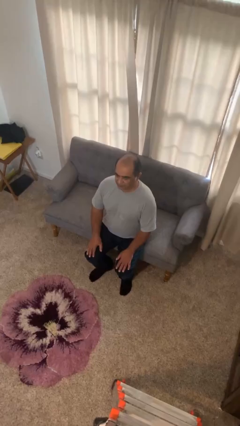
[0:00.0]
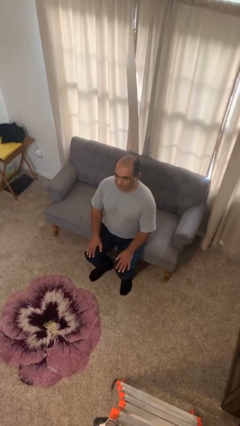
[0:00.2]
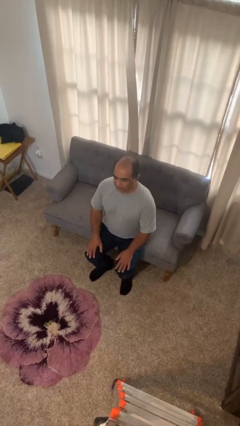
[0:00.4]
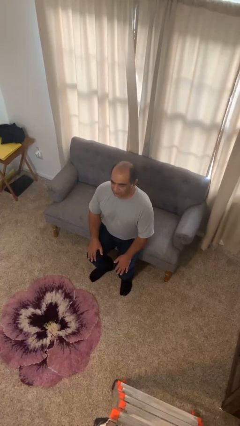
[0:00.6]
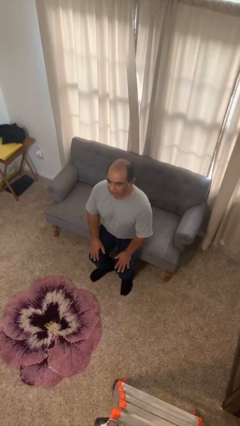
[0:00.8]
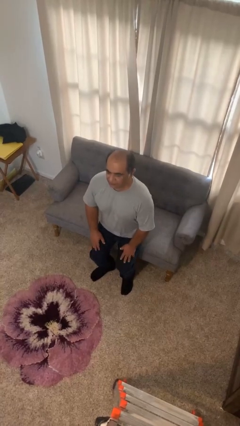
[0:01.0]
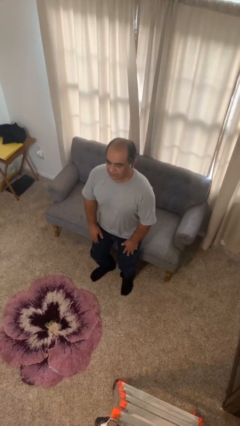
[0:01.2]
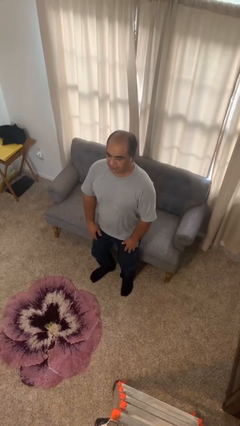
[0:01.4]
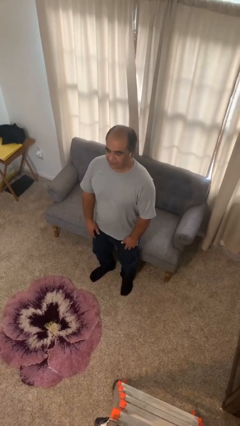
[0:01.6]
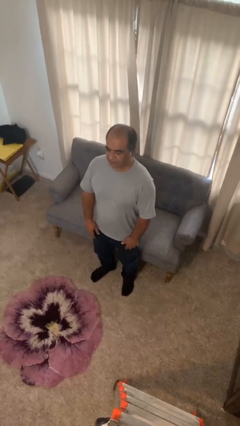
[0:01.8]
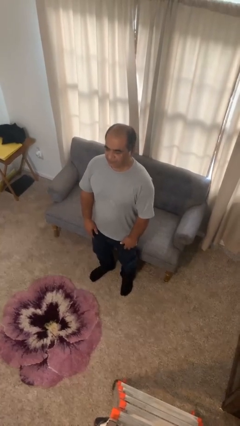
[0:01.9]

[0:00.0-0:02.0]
person stands up

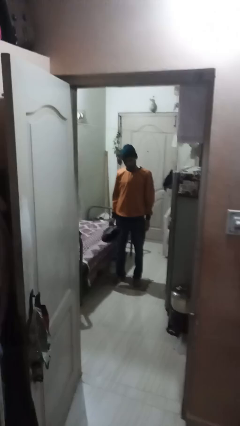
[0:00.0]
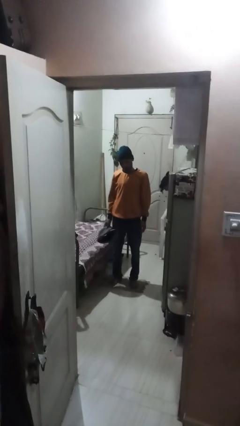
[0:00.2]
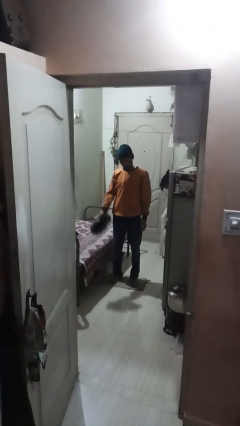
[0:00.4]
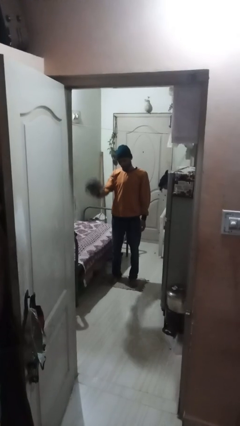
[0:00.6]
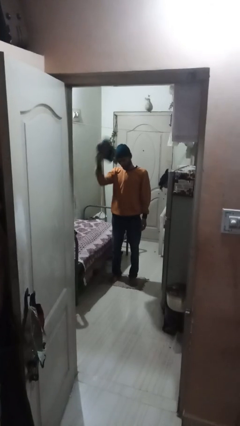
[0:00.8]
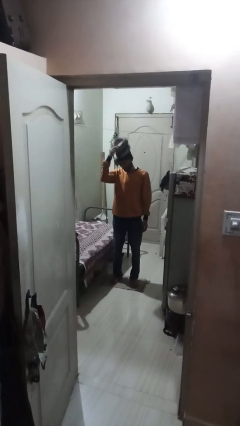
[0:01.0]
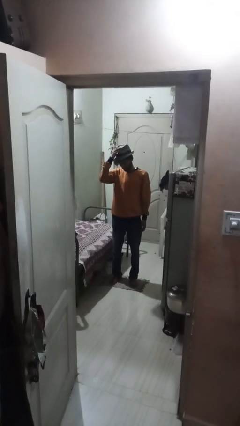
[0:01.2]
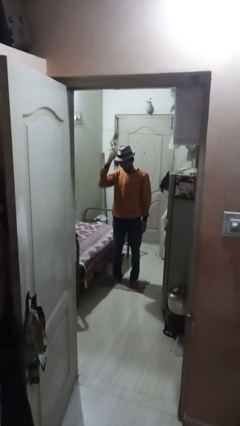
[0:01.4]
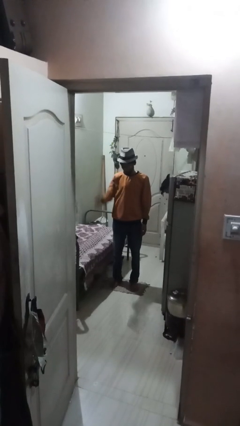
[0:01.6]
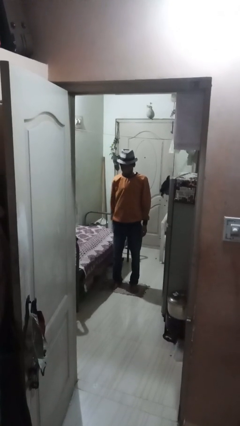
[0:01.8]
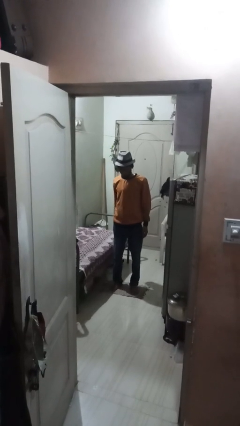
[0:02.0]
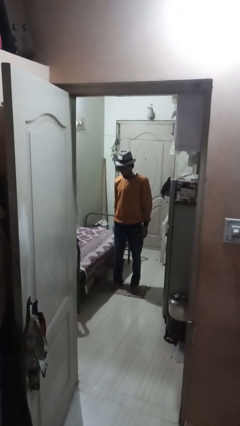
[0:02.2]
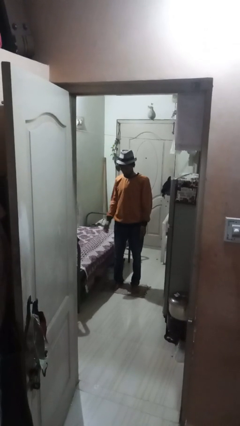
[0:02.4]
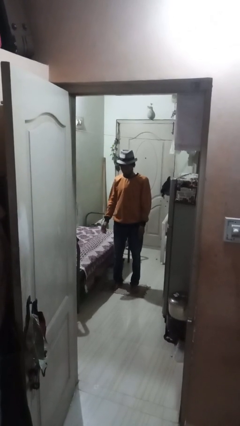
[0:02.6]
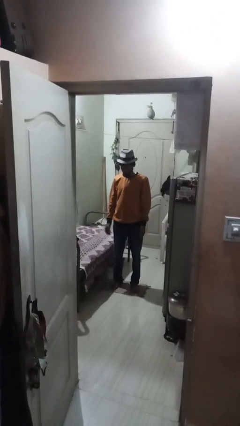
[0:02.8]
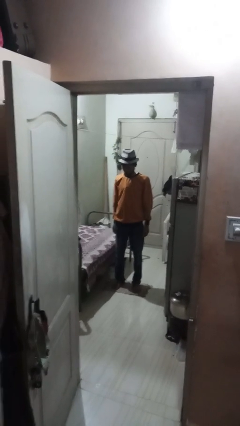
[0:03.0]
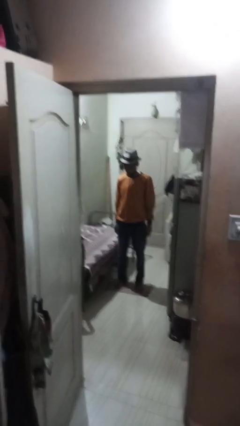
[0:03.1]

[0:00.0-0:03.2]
person puts on hat

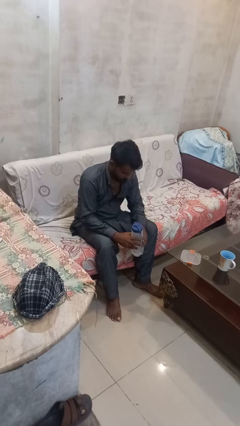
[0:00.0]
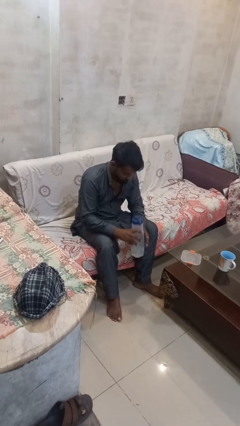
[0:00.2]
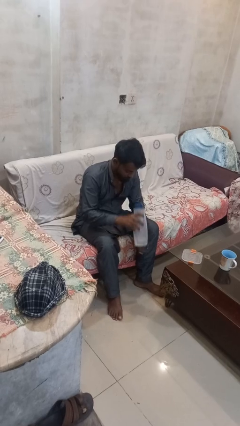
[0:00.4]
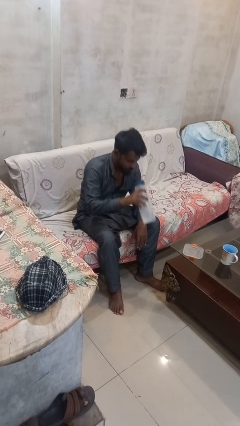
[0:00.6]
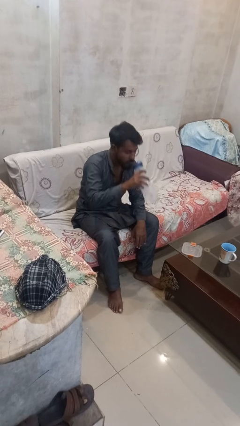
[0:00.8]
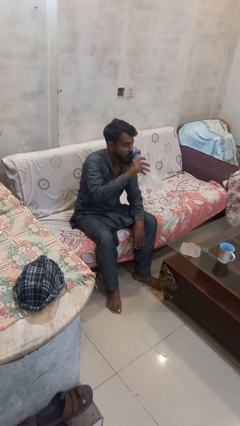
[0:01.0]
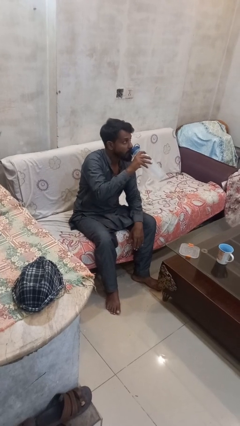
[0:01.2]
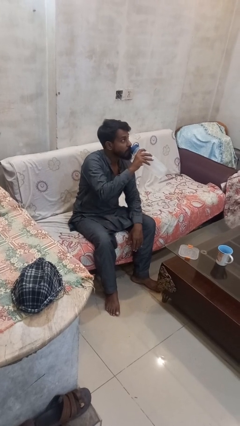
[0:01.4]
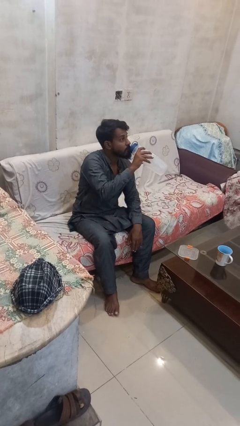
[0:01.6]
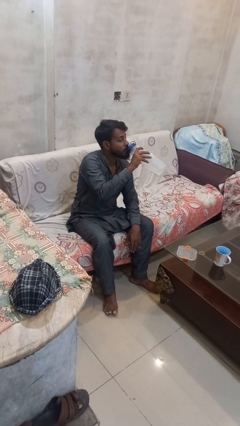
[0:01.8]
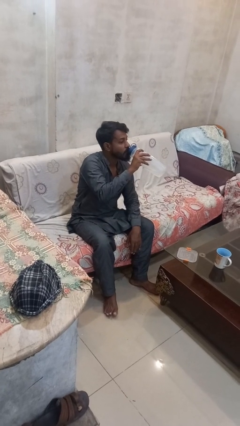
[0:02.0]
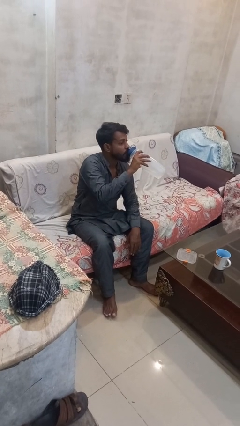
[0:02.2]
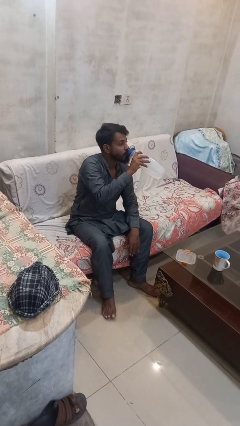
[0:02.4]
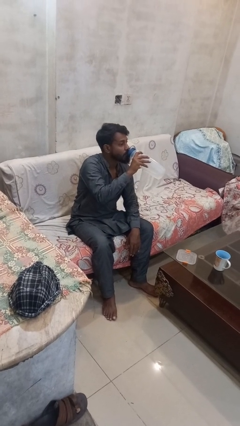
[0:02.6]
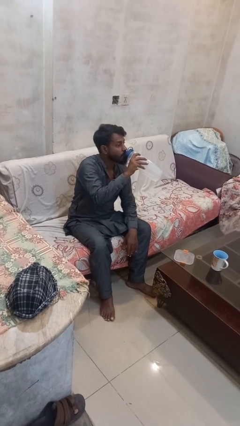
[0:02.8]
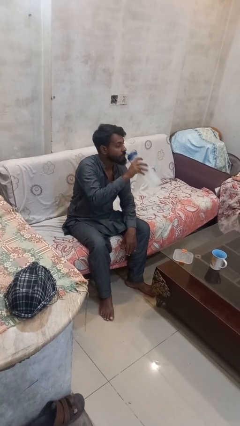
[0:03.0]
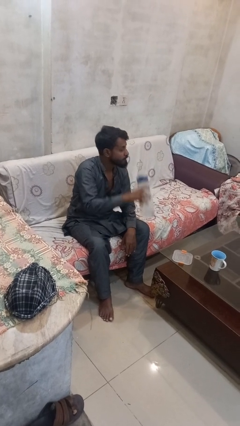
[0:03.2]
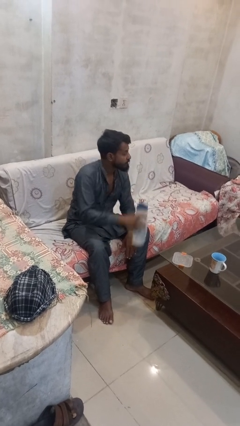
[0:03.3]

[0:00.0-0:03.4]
person drinks from bottle

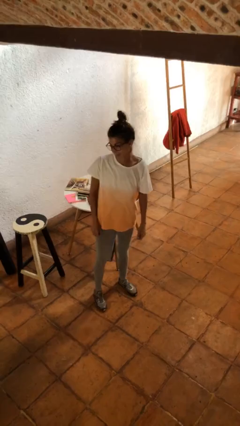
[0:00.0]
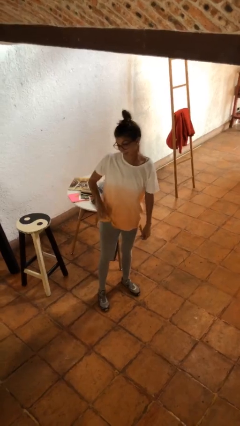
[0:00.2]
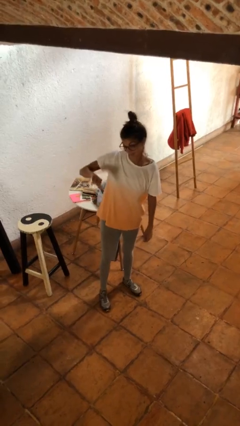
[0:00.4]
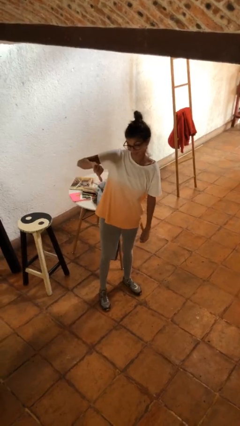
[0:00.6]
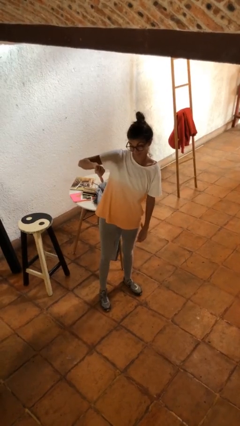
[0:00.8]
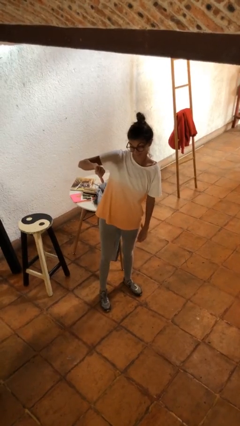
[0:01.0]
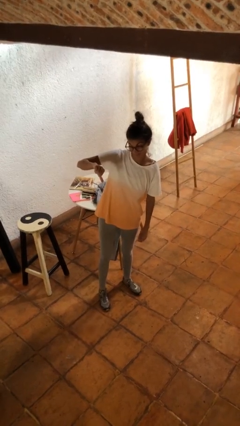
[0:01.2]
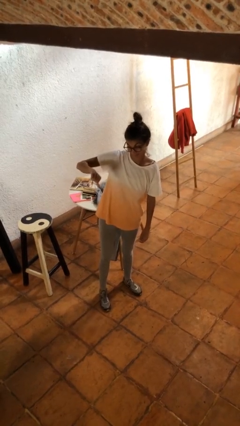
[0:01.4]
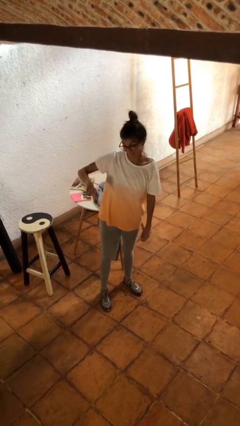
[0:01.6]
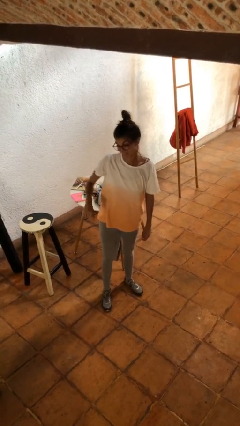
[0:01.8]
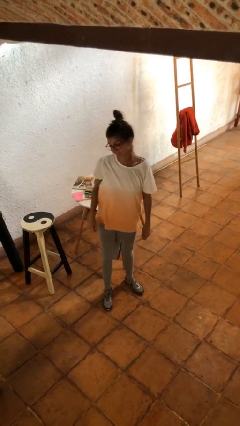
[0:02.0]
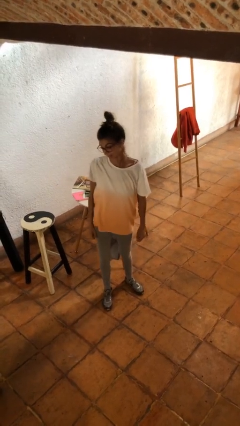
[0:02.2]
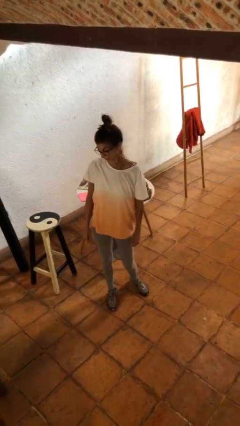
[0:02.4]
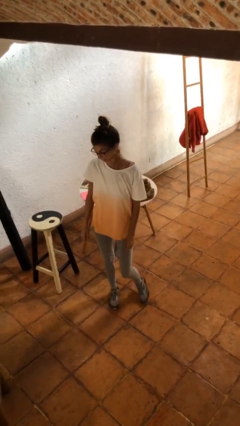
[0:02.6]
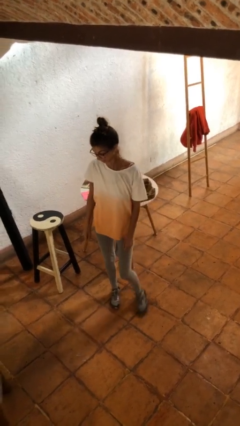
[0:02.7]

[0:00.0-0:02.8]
person gestures thumbs down

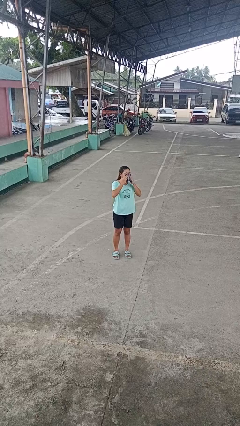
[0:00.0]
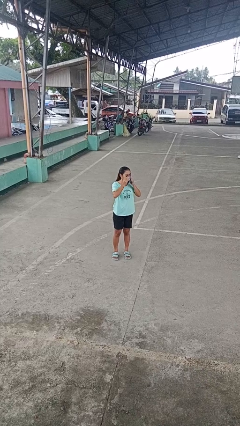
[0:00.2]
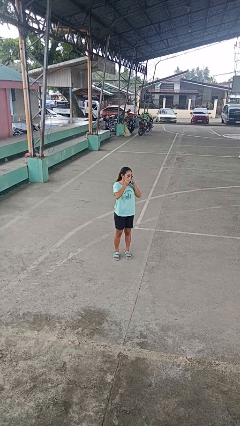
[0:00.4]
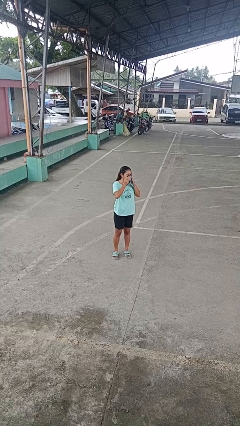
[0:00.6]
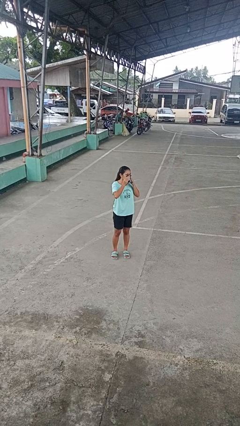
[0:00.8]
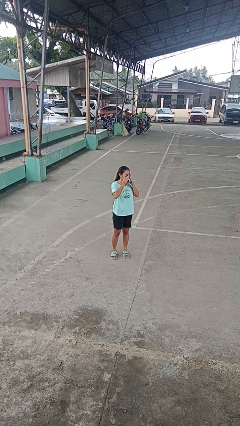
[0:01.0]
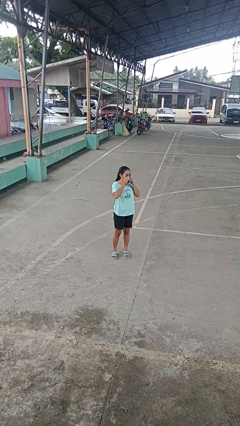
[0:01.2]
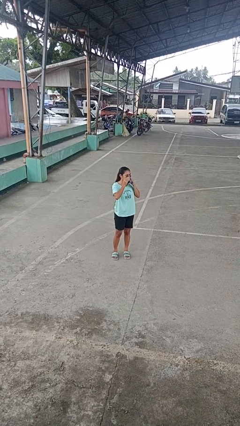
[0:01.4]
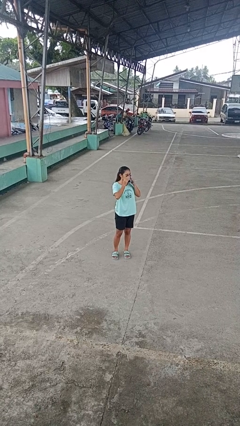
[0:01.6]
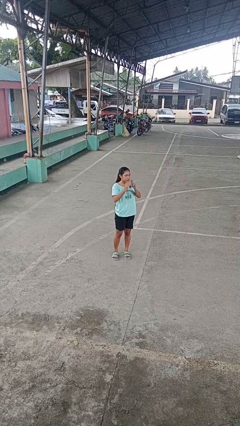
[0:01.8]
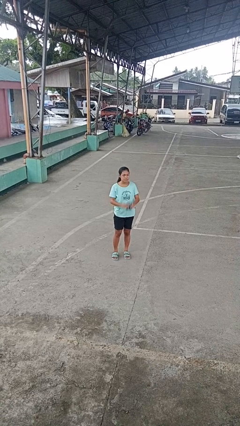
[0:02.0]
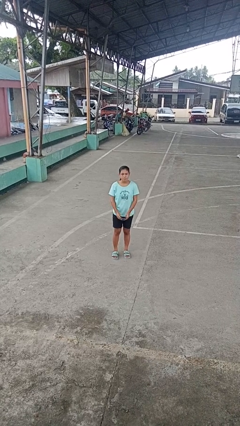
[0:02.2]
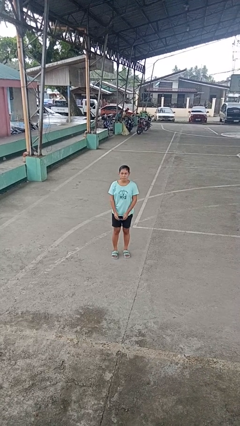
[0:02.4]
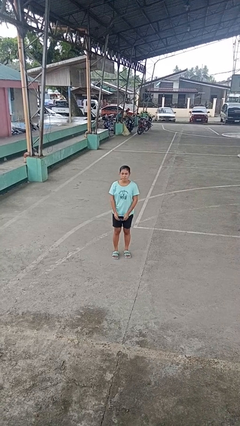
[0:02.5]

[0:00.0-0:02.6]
person blows nose

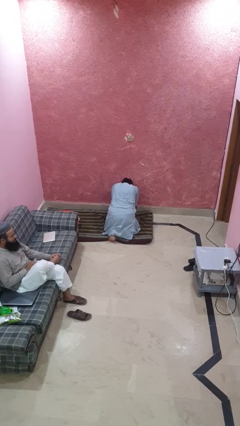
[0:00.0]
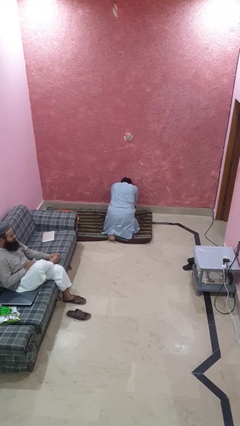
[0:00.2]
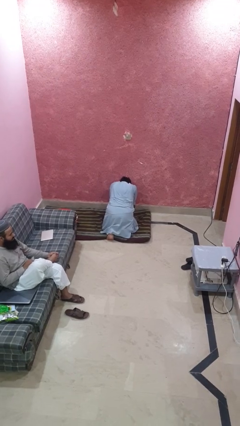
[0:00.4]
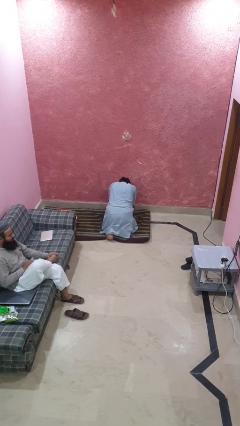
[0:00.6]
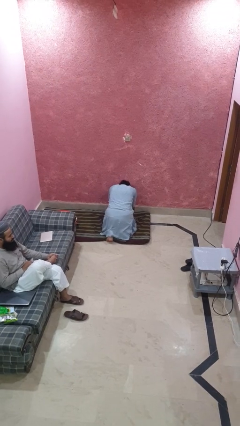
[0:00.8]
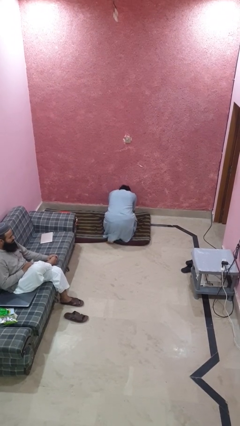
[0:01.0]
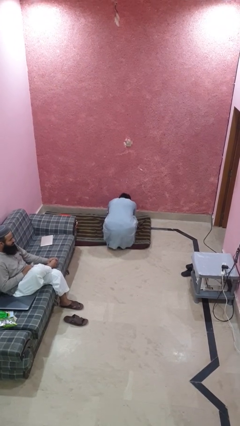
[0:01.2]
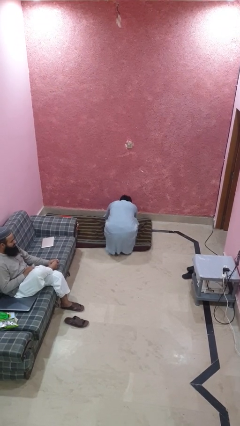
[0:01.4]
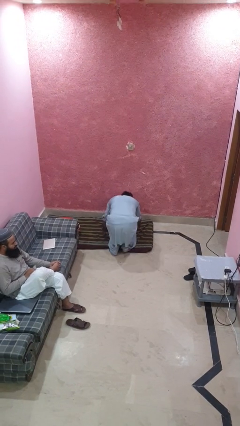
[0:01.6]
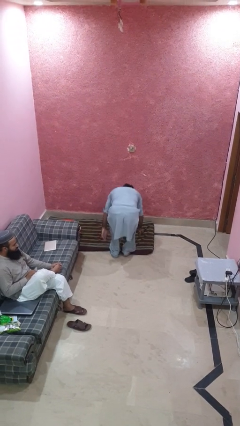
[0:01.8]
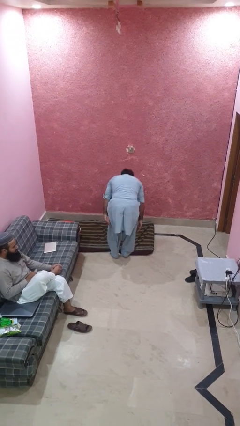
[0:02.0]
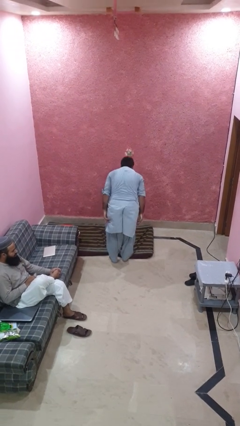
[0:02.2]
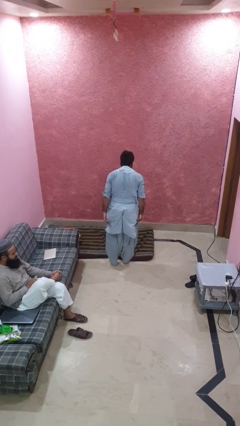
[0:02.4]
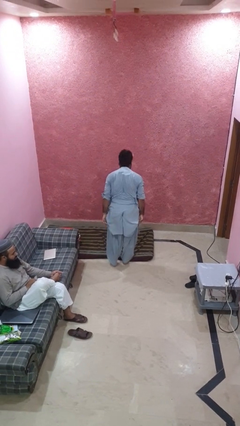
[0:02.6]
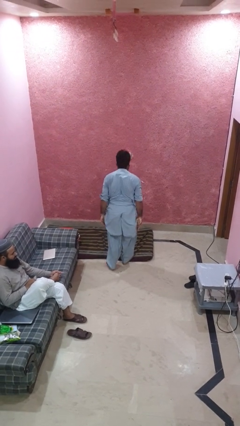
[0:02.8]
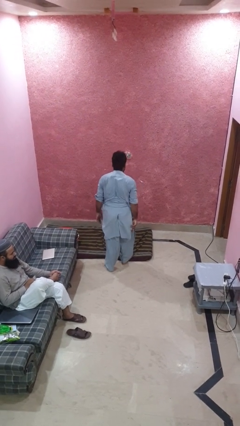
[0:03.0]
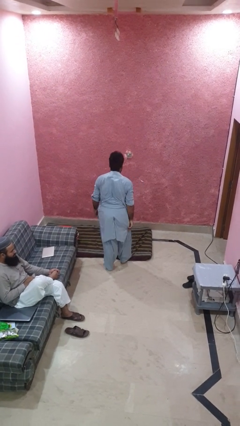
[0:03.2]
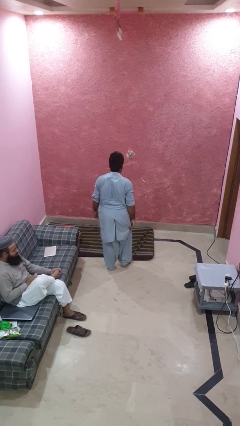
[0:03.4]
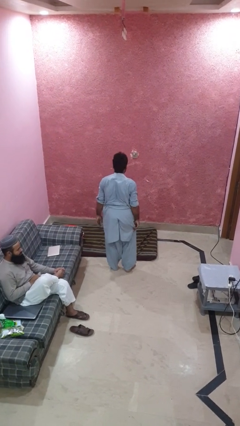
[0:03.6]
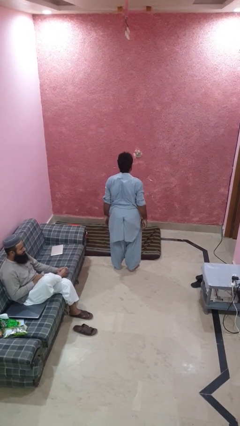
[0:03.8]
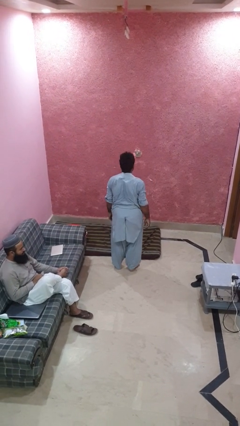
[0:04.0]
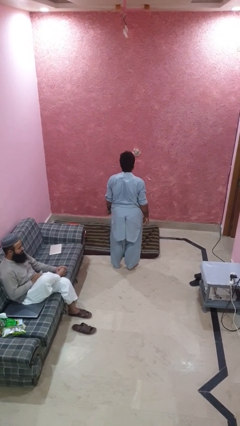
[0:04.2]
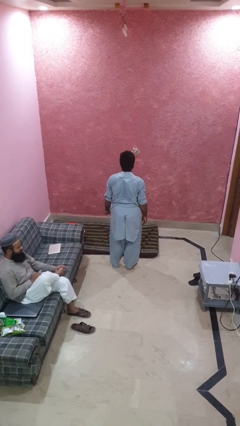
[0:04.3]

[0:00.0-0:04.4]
person stands up from floor
